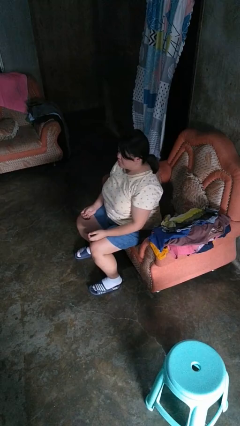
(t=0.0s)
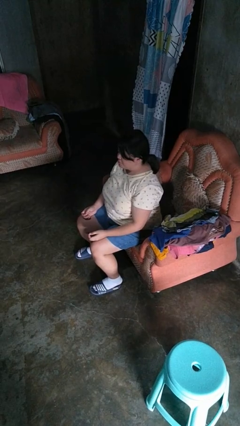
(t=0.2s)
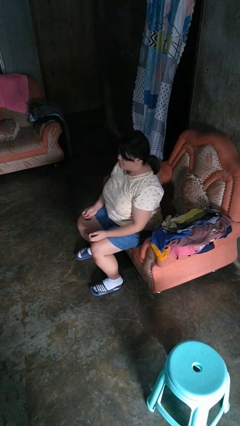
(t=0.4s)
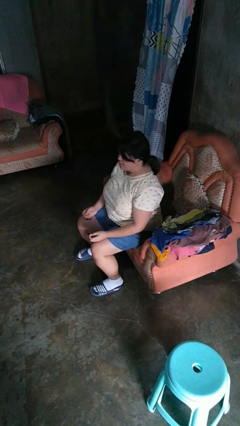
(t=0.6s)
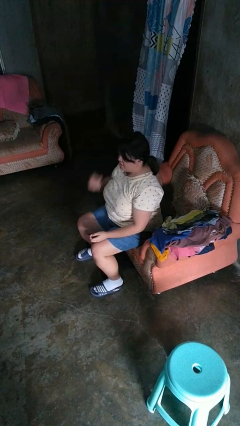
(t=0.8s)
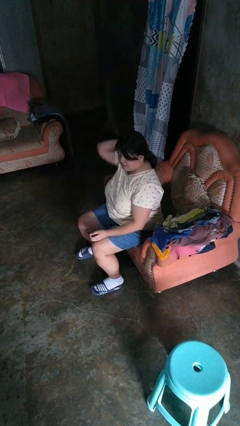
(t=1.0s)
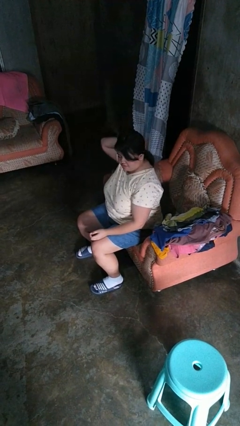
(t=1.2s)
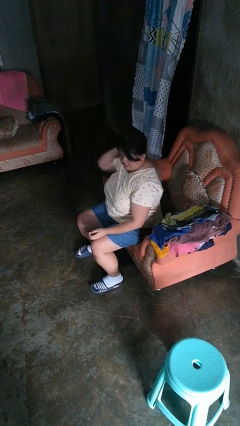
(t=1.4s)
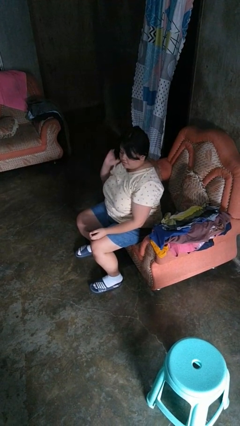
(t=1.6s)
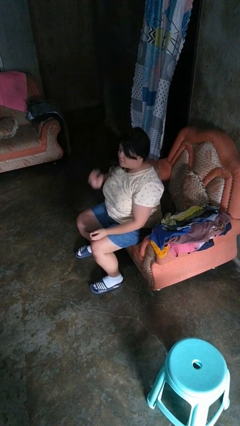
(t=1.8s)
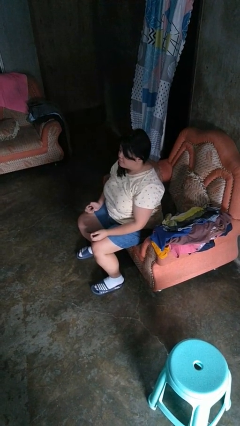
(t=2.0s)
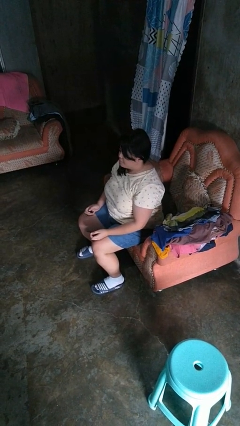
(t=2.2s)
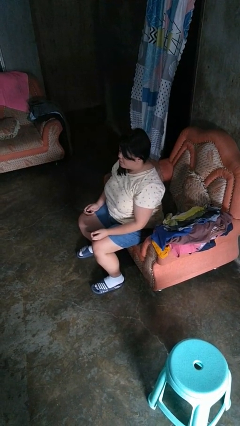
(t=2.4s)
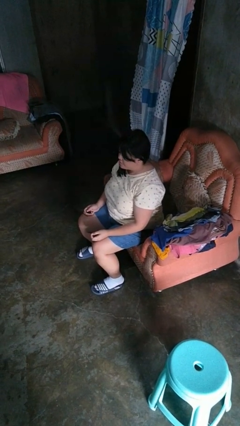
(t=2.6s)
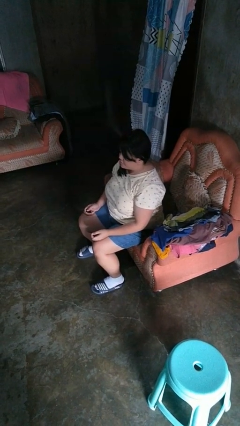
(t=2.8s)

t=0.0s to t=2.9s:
person takes off hairtie

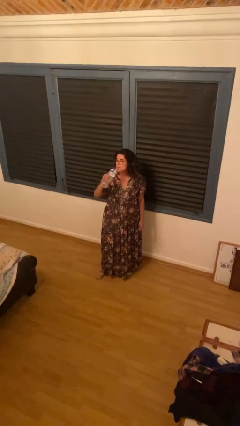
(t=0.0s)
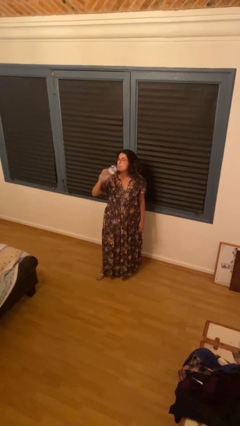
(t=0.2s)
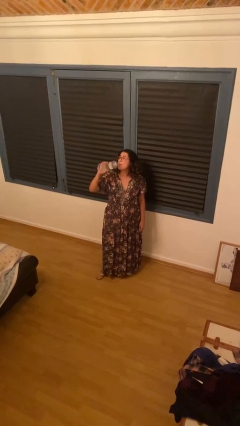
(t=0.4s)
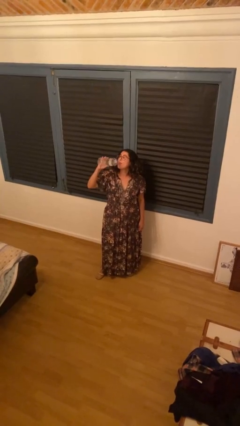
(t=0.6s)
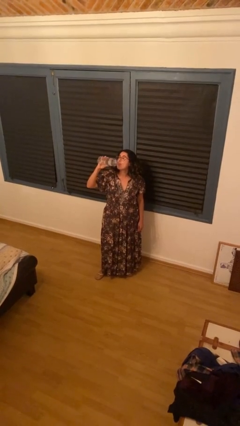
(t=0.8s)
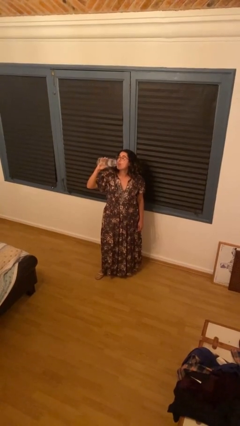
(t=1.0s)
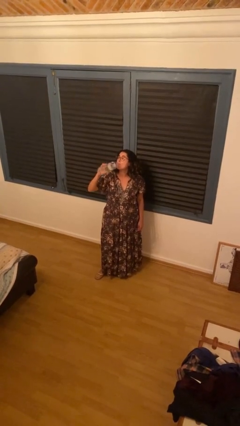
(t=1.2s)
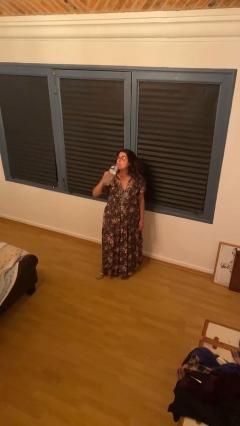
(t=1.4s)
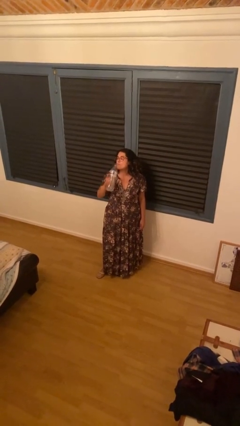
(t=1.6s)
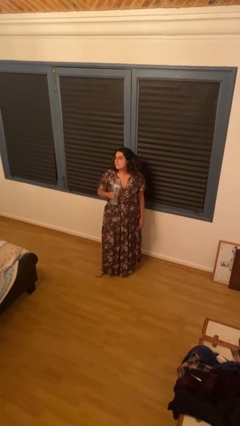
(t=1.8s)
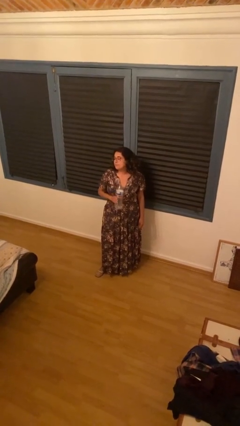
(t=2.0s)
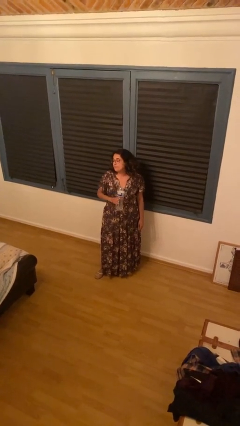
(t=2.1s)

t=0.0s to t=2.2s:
person drinks from bottle

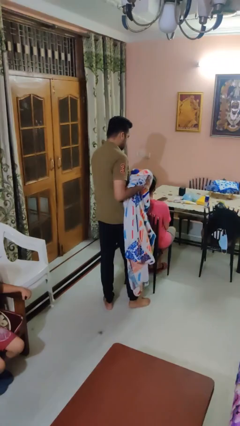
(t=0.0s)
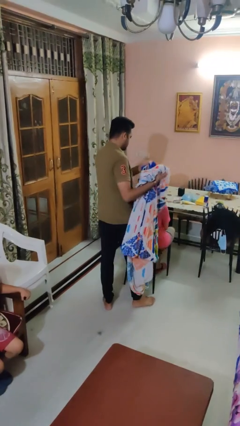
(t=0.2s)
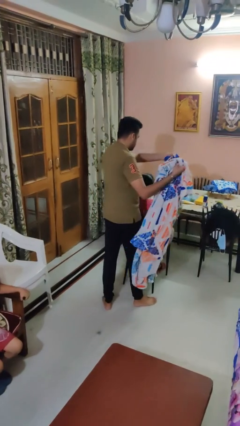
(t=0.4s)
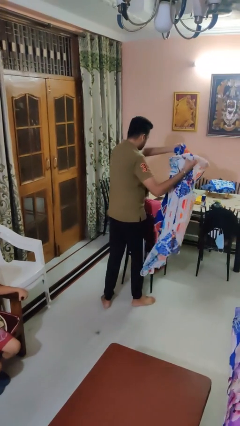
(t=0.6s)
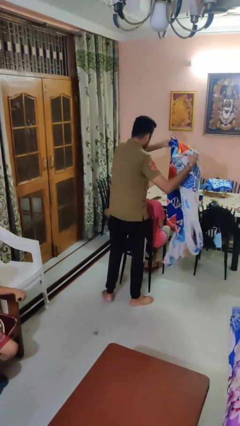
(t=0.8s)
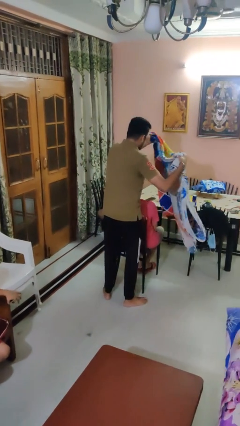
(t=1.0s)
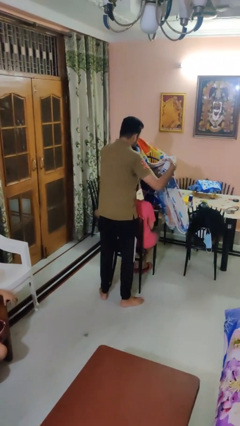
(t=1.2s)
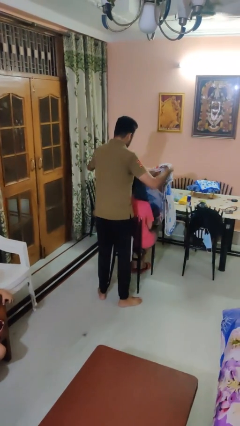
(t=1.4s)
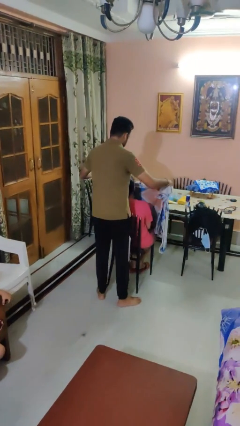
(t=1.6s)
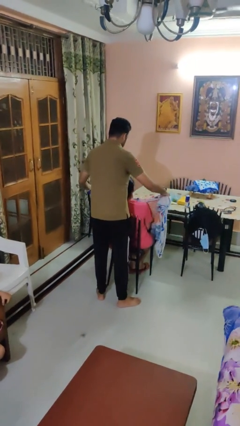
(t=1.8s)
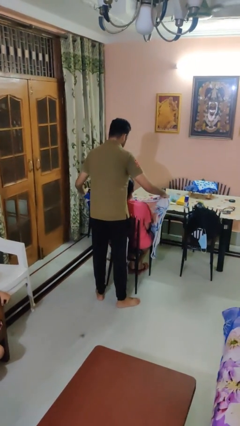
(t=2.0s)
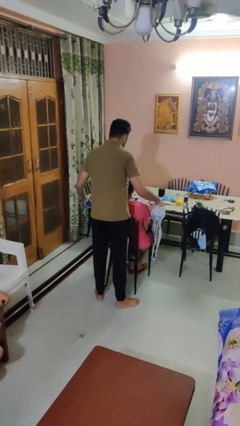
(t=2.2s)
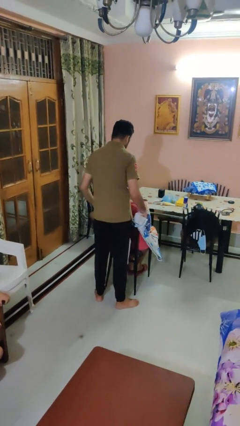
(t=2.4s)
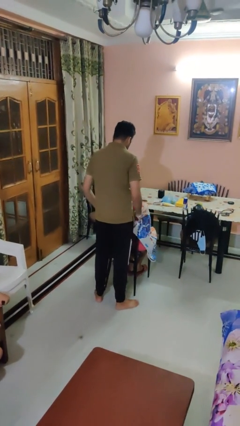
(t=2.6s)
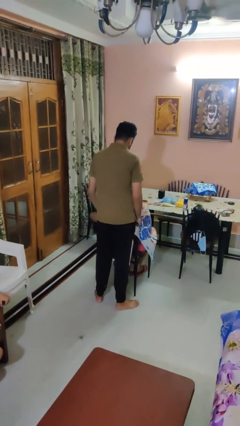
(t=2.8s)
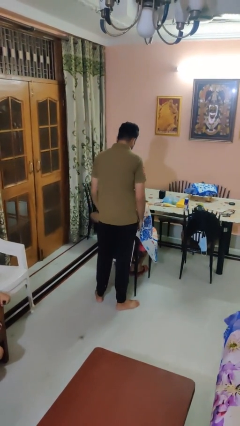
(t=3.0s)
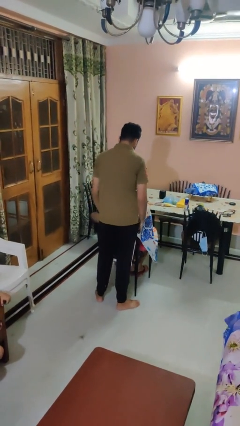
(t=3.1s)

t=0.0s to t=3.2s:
person covers friend with blanket

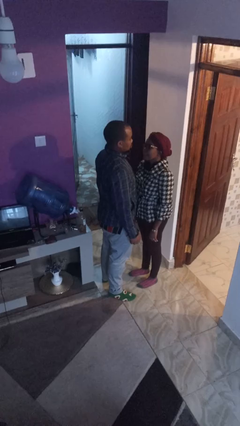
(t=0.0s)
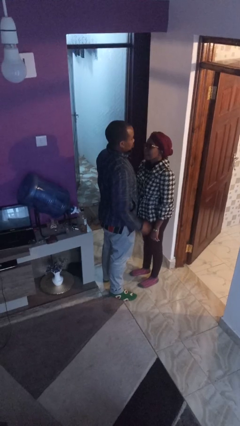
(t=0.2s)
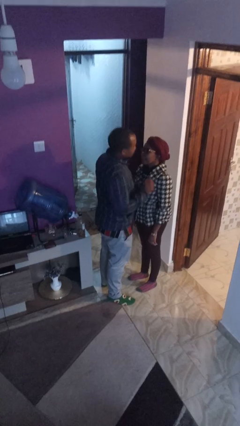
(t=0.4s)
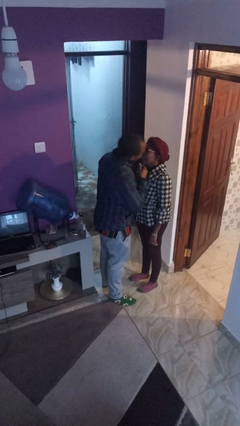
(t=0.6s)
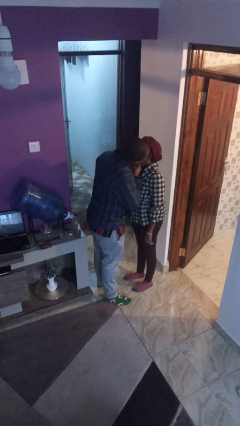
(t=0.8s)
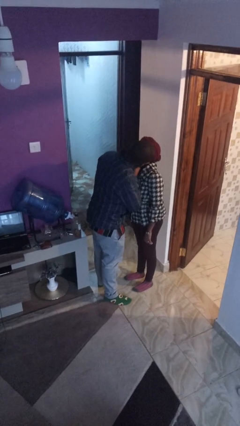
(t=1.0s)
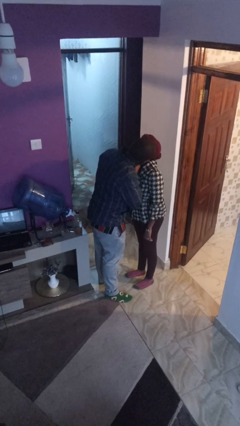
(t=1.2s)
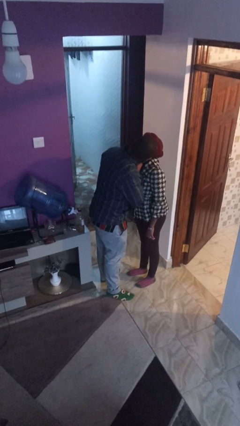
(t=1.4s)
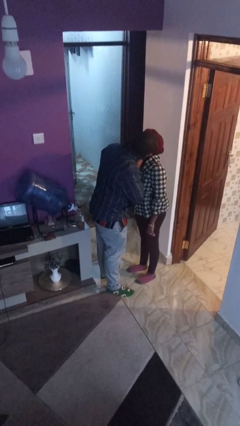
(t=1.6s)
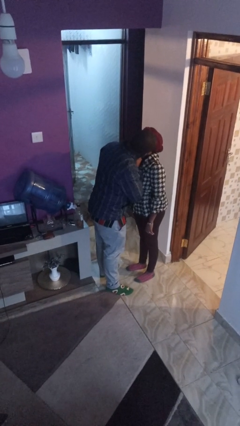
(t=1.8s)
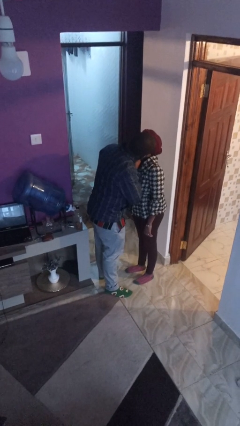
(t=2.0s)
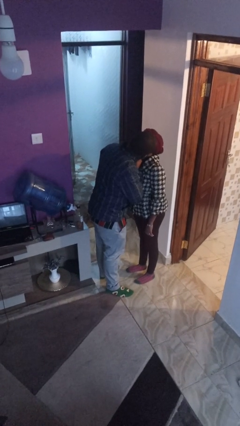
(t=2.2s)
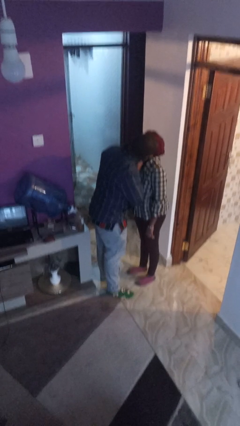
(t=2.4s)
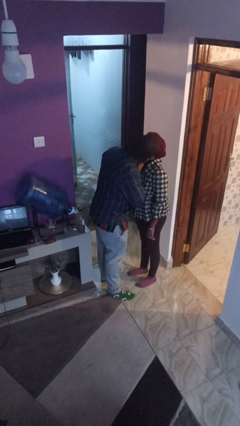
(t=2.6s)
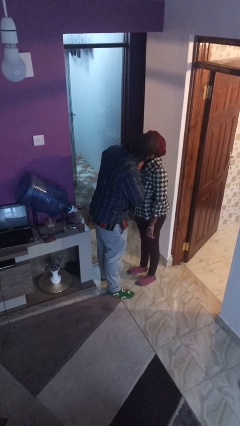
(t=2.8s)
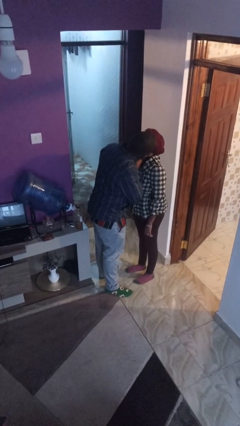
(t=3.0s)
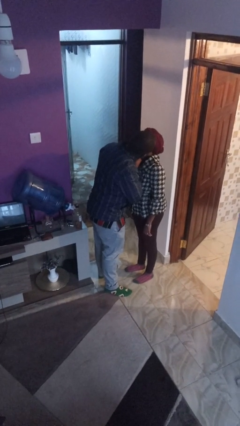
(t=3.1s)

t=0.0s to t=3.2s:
person kisses cheek of person

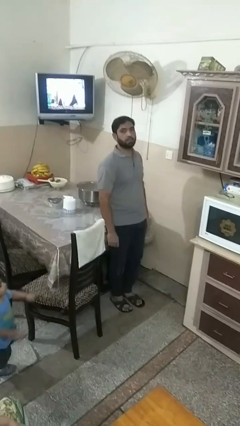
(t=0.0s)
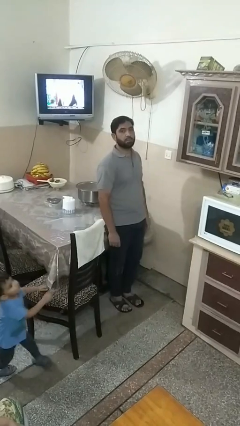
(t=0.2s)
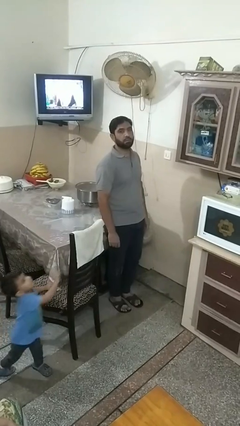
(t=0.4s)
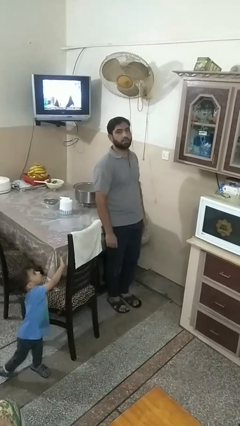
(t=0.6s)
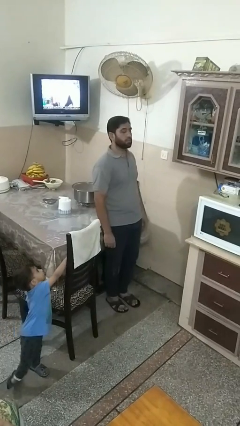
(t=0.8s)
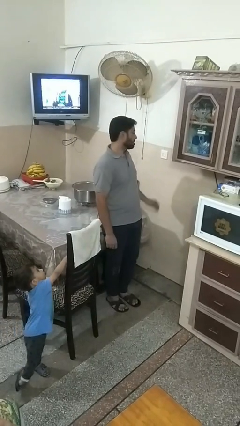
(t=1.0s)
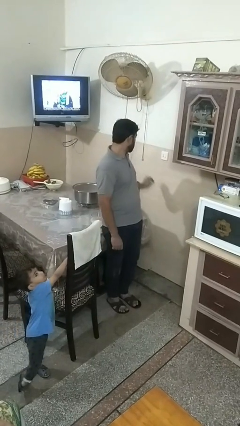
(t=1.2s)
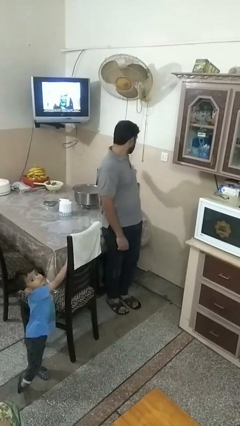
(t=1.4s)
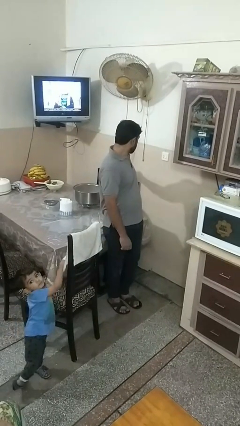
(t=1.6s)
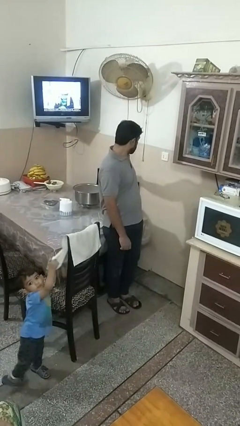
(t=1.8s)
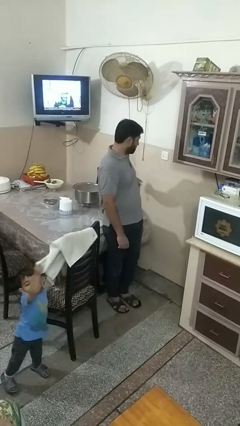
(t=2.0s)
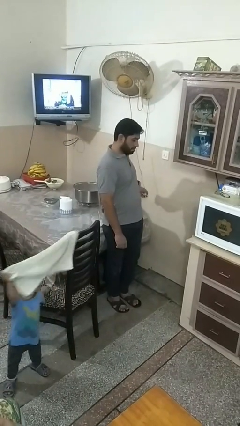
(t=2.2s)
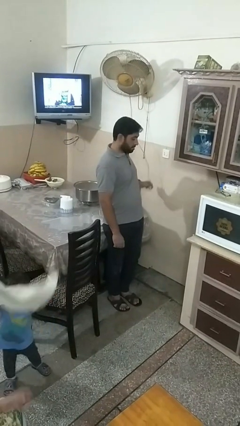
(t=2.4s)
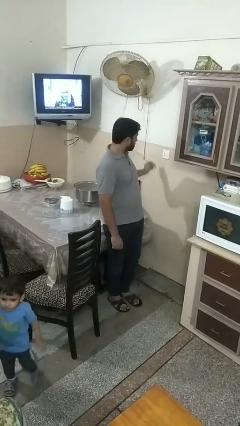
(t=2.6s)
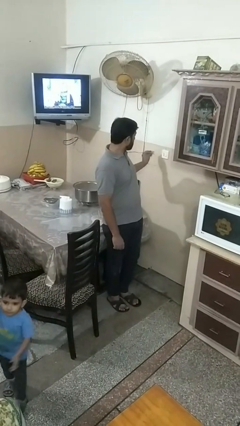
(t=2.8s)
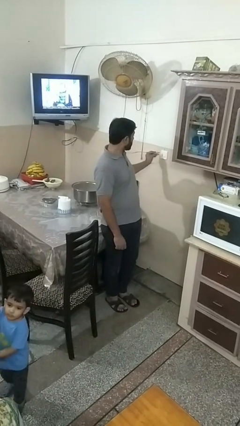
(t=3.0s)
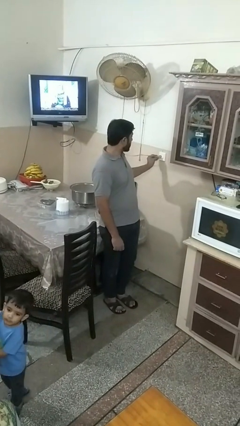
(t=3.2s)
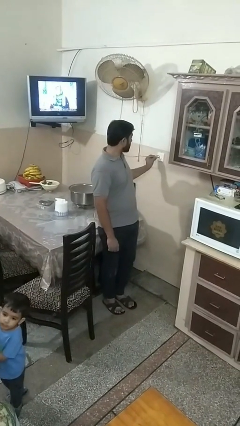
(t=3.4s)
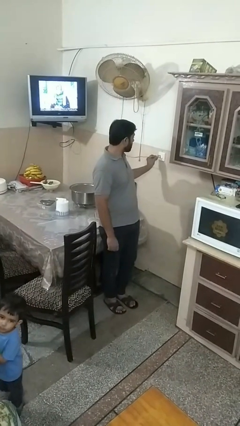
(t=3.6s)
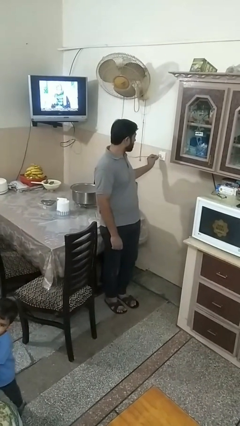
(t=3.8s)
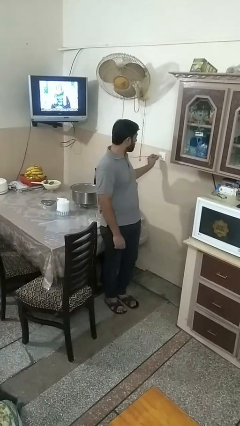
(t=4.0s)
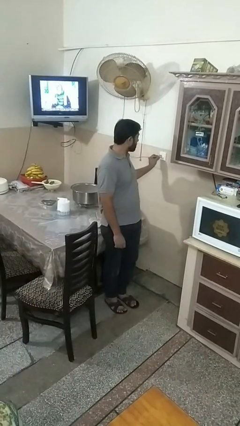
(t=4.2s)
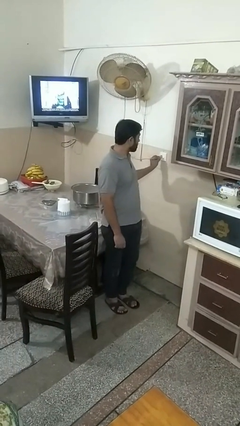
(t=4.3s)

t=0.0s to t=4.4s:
person plugs into electrical socket

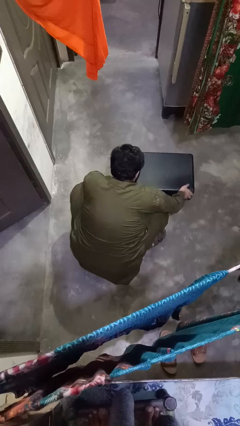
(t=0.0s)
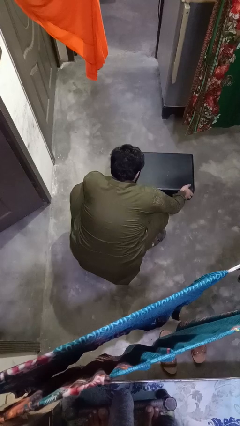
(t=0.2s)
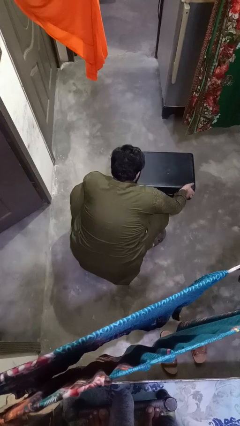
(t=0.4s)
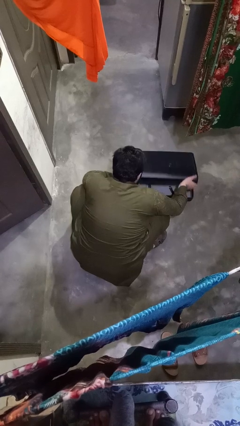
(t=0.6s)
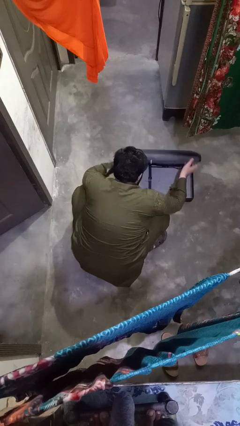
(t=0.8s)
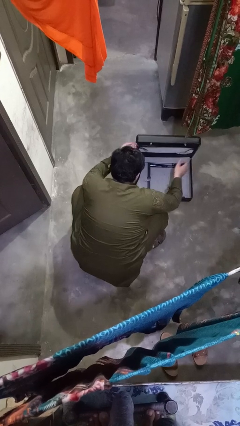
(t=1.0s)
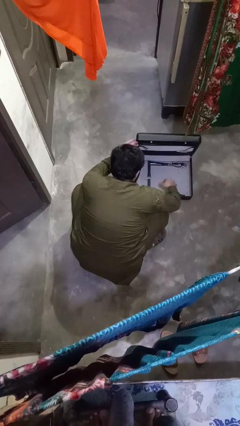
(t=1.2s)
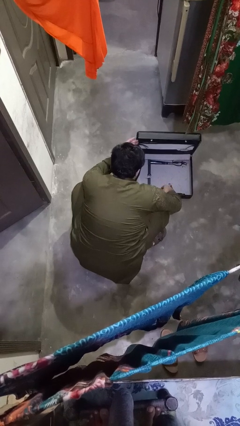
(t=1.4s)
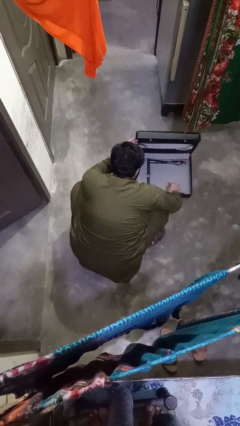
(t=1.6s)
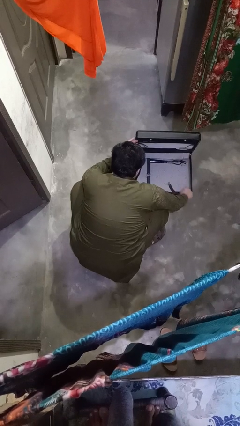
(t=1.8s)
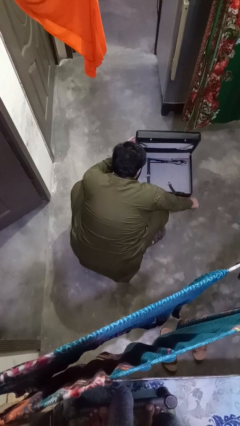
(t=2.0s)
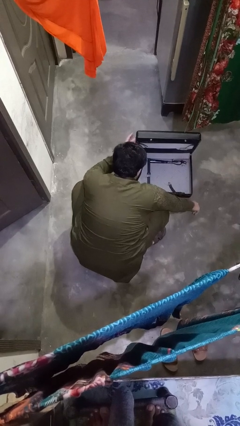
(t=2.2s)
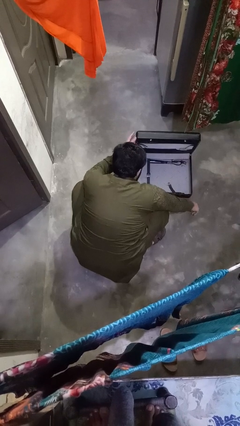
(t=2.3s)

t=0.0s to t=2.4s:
person opens suitcase
